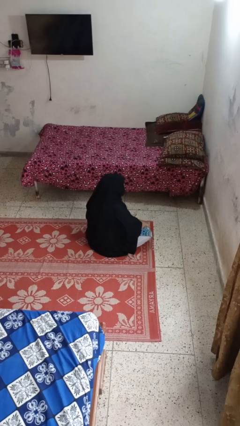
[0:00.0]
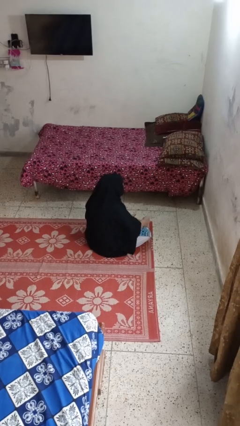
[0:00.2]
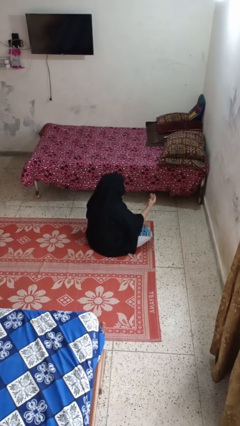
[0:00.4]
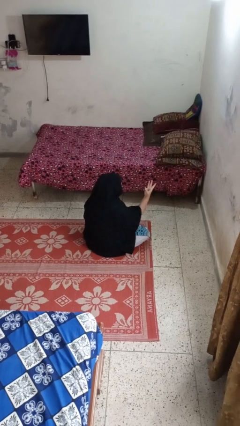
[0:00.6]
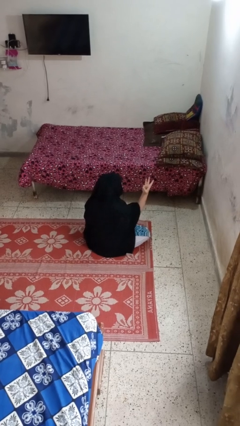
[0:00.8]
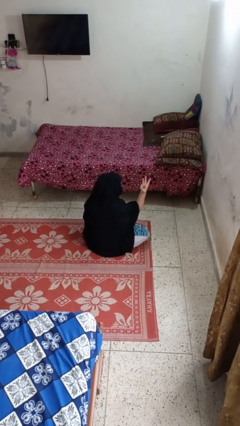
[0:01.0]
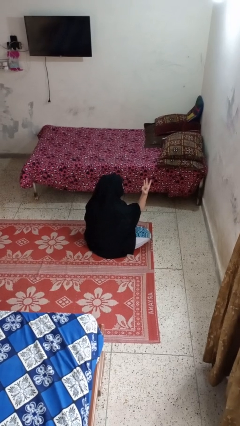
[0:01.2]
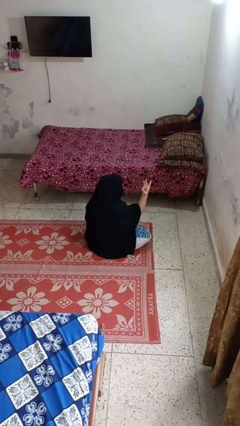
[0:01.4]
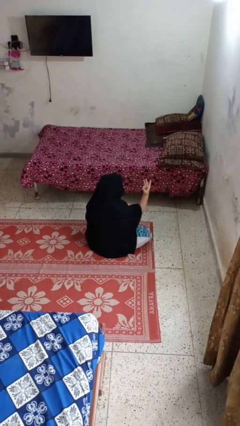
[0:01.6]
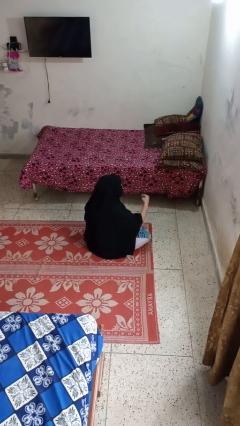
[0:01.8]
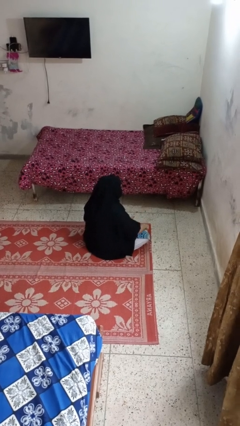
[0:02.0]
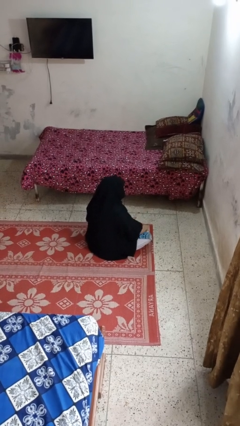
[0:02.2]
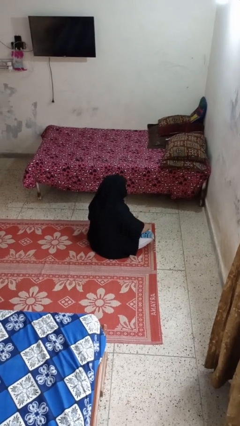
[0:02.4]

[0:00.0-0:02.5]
person gestures number three

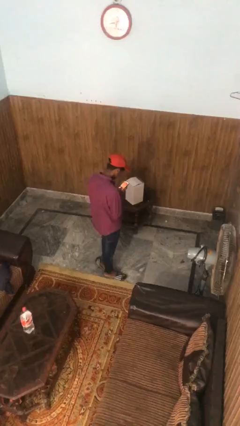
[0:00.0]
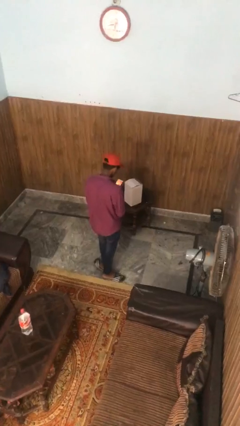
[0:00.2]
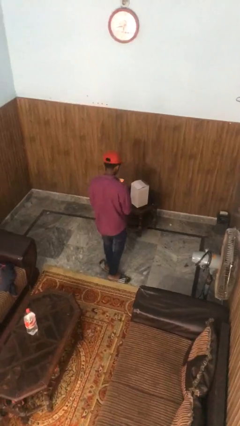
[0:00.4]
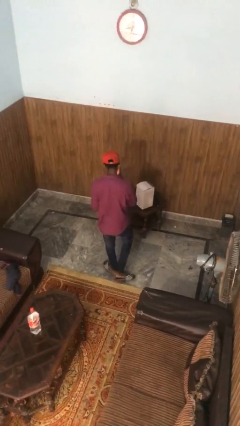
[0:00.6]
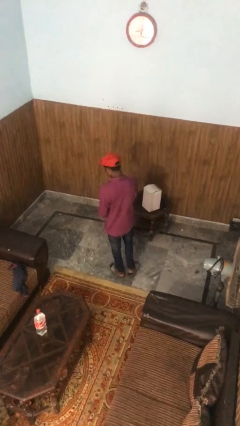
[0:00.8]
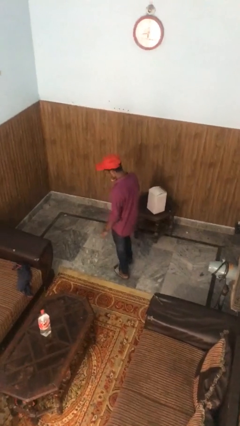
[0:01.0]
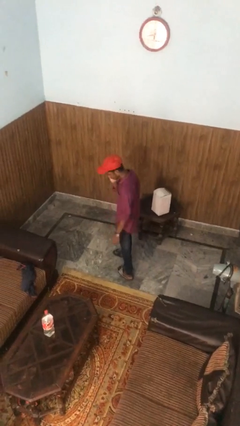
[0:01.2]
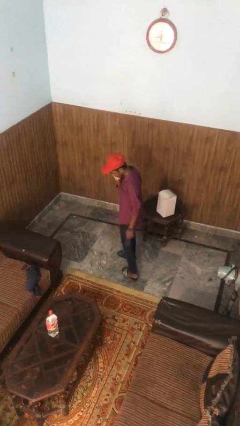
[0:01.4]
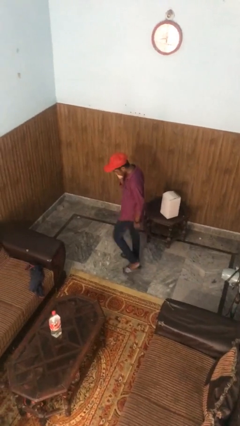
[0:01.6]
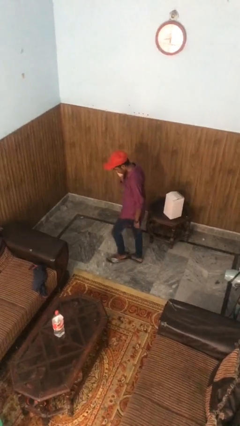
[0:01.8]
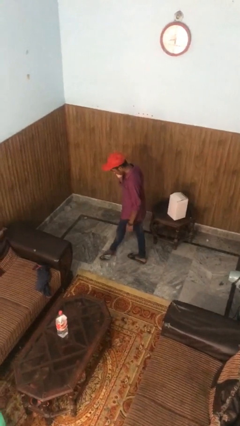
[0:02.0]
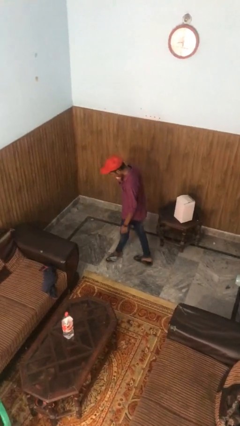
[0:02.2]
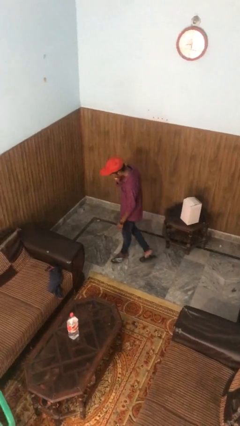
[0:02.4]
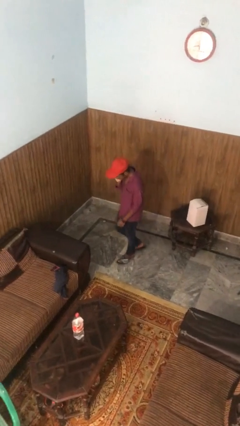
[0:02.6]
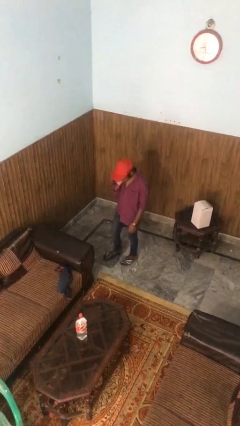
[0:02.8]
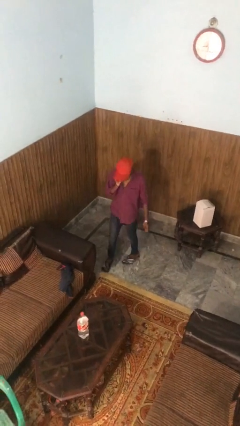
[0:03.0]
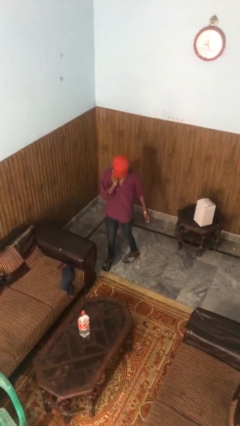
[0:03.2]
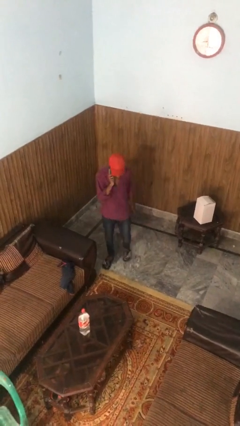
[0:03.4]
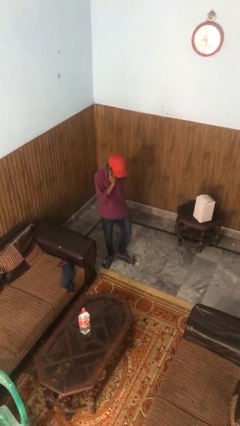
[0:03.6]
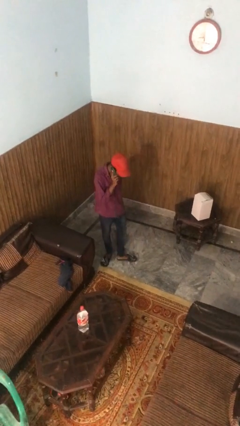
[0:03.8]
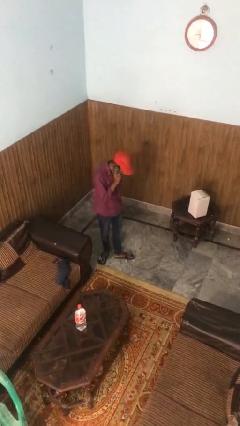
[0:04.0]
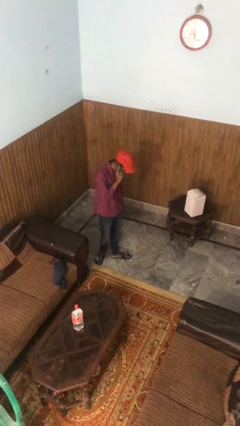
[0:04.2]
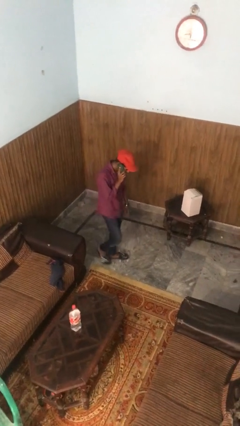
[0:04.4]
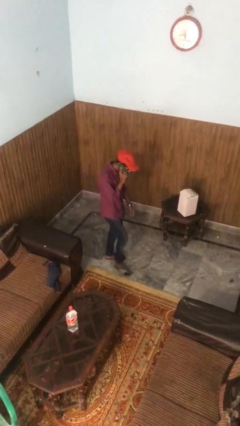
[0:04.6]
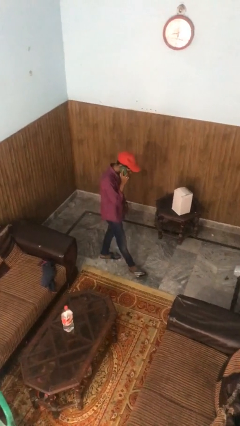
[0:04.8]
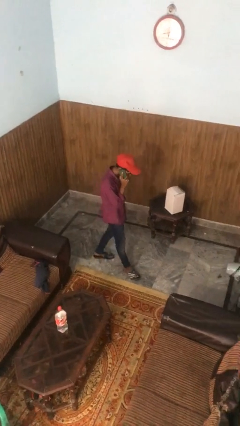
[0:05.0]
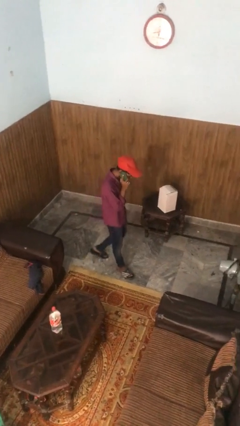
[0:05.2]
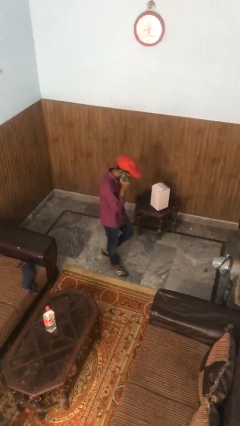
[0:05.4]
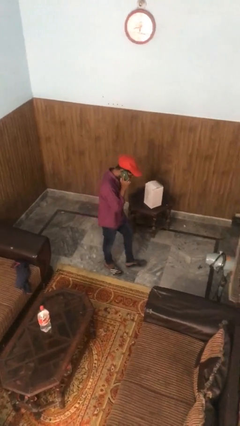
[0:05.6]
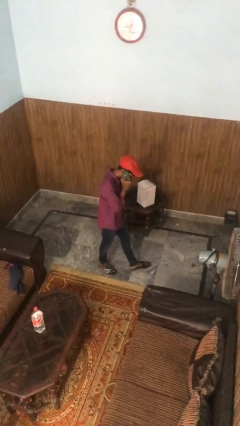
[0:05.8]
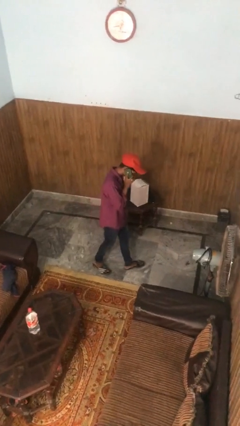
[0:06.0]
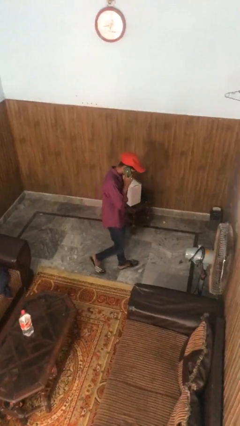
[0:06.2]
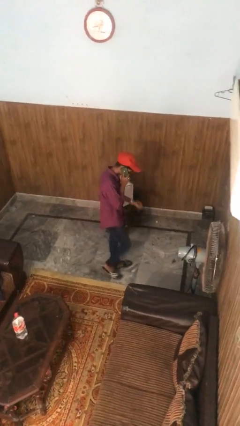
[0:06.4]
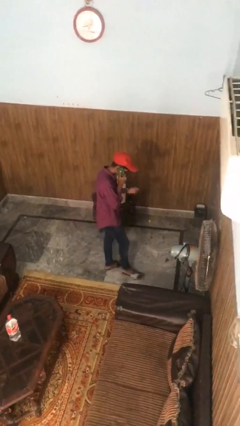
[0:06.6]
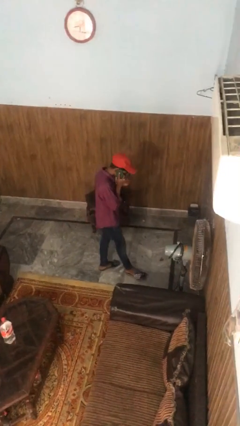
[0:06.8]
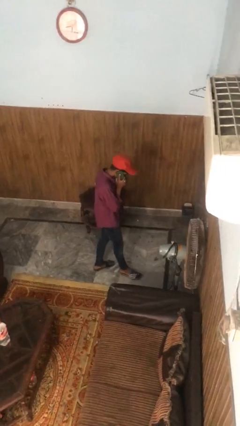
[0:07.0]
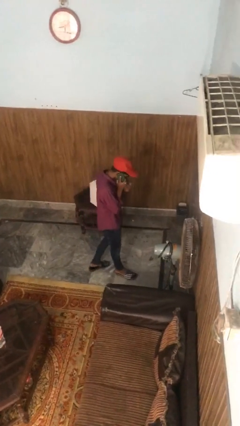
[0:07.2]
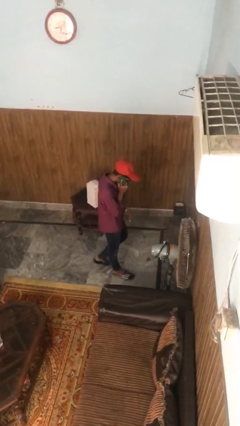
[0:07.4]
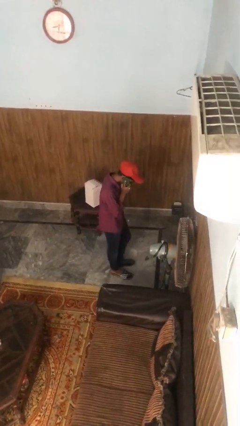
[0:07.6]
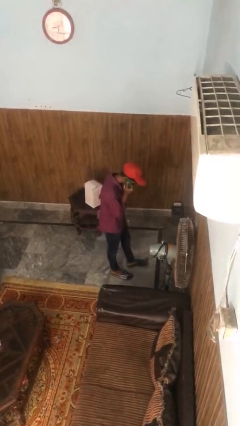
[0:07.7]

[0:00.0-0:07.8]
person talks on phone

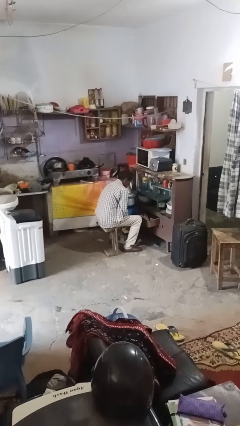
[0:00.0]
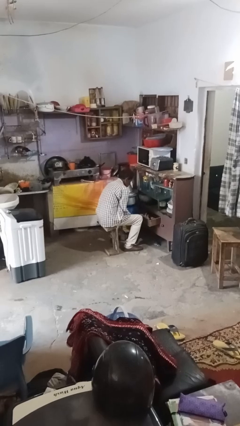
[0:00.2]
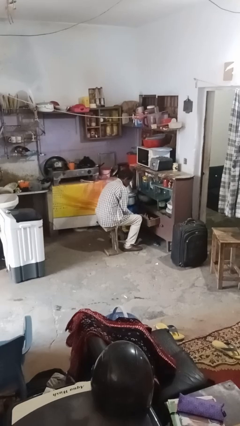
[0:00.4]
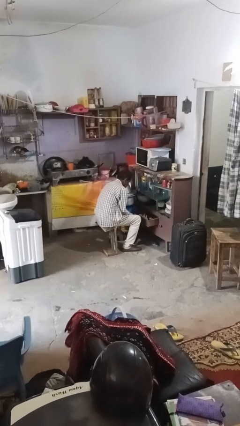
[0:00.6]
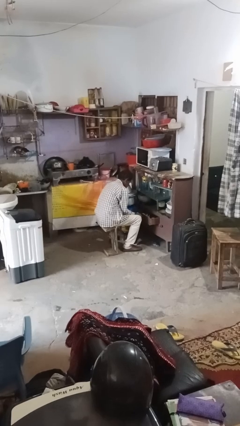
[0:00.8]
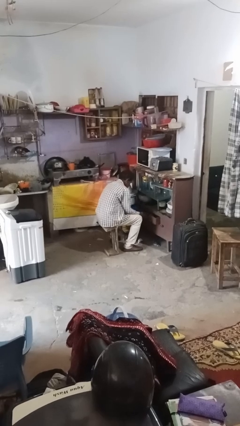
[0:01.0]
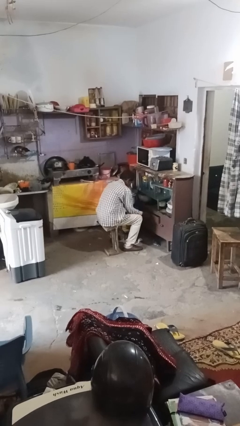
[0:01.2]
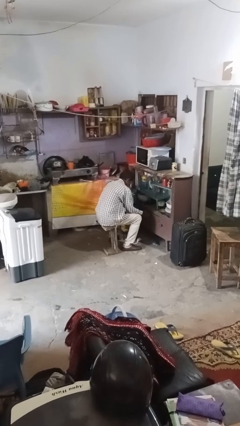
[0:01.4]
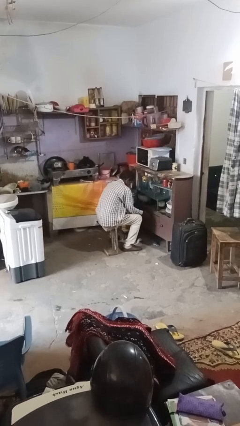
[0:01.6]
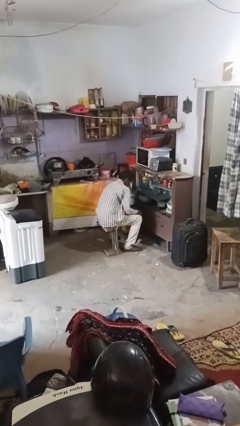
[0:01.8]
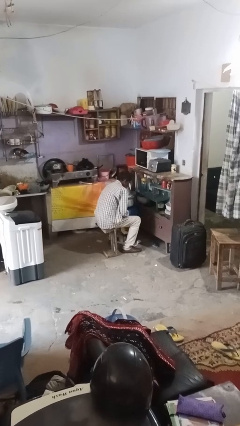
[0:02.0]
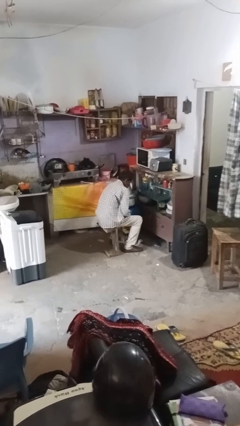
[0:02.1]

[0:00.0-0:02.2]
person closes kitchen drawer

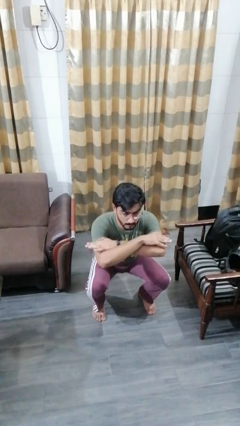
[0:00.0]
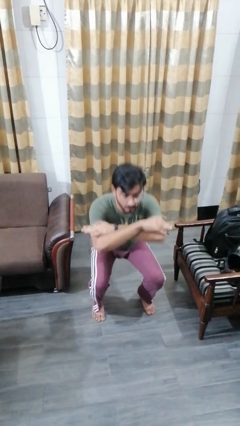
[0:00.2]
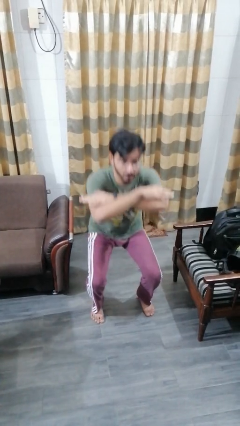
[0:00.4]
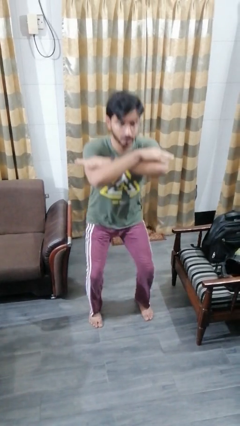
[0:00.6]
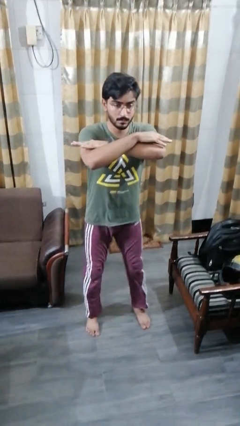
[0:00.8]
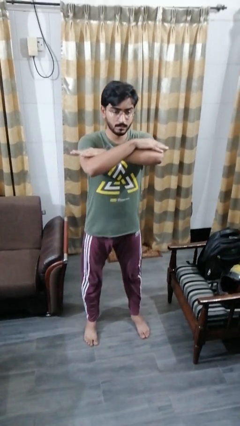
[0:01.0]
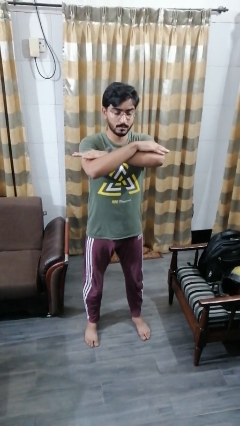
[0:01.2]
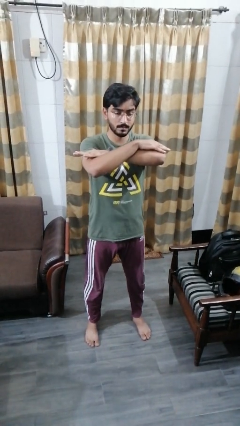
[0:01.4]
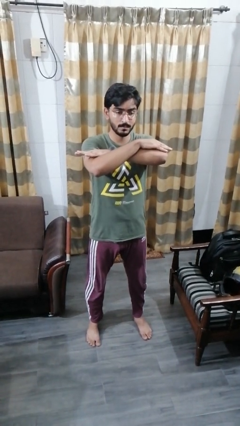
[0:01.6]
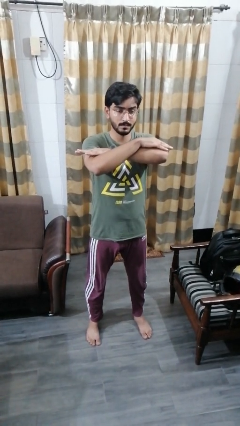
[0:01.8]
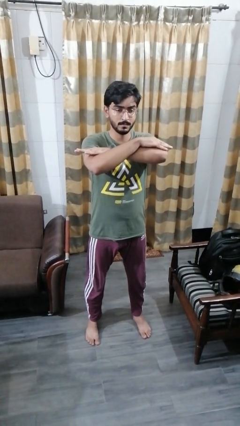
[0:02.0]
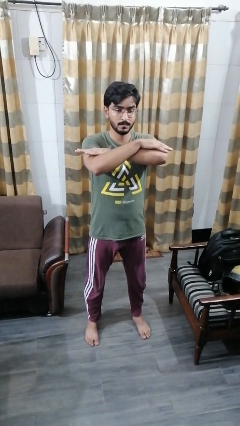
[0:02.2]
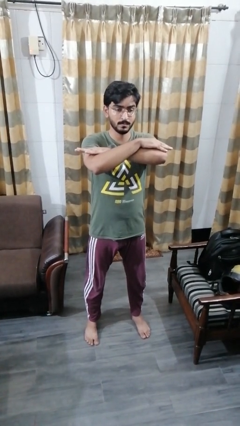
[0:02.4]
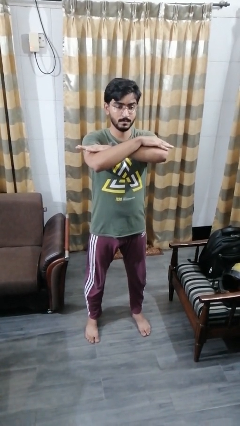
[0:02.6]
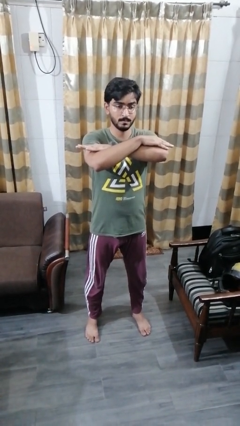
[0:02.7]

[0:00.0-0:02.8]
person stands up from floor

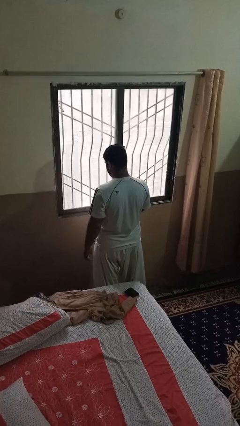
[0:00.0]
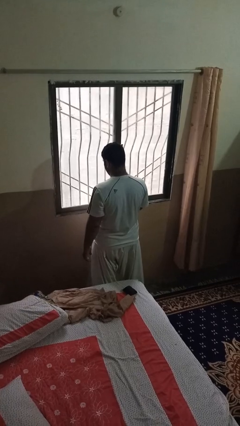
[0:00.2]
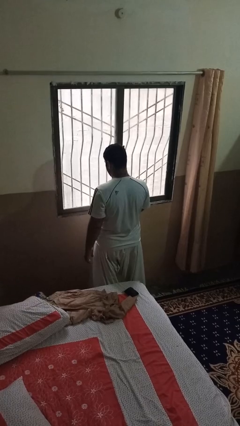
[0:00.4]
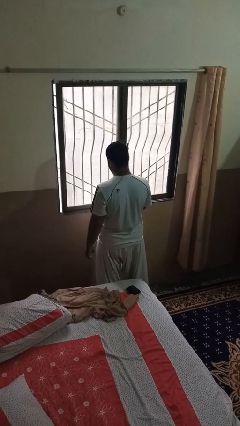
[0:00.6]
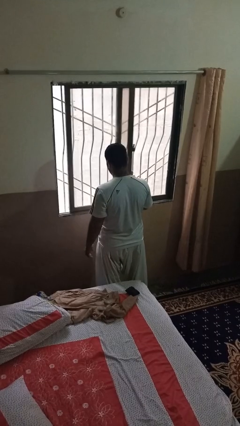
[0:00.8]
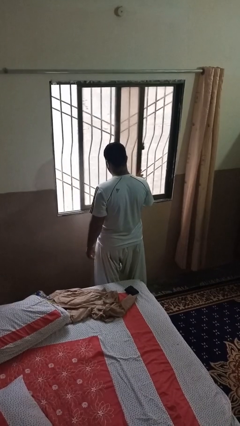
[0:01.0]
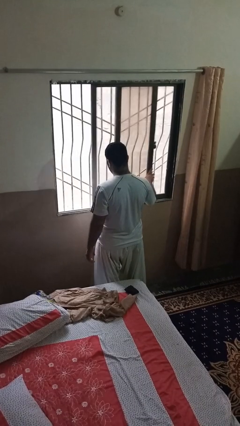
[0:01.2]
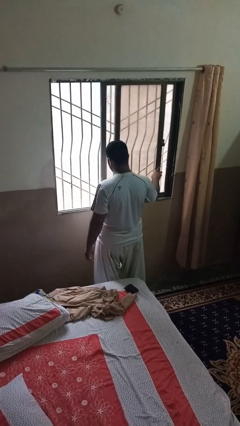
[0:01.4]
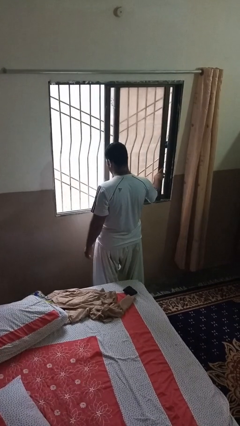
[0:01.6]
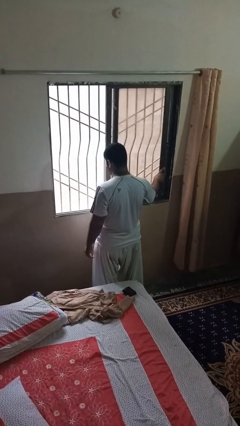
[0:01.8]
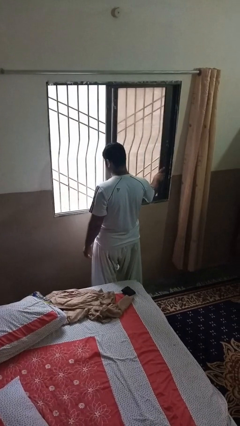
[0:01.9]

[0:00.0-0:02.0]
person opens home window

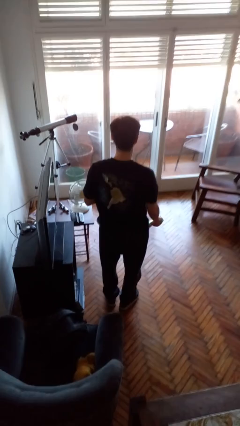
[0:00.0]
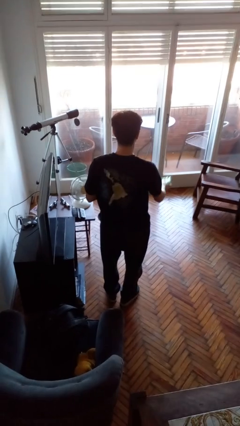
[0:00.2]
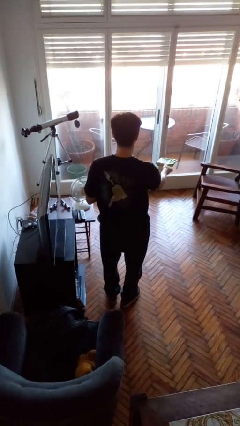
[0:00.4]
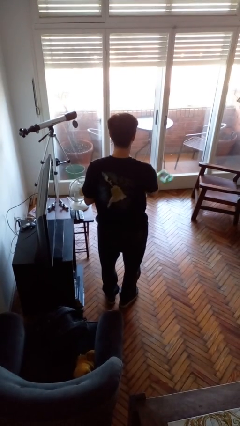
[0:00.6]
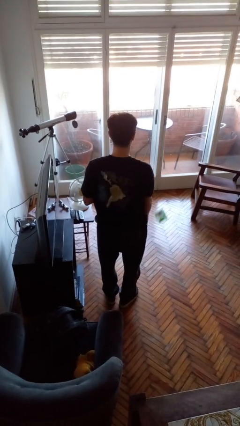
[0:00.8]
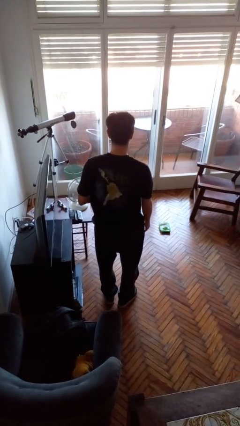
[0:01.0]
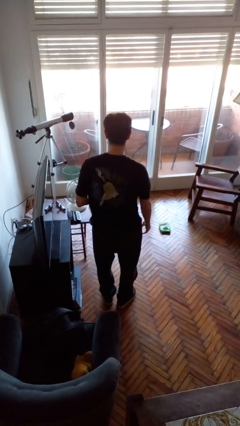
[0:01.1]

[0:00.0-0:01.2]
person throws object to ground
